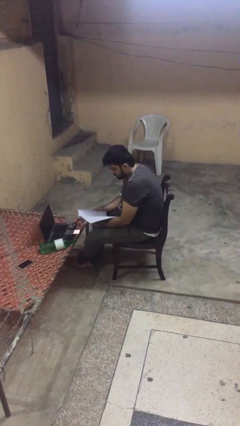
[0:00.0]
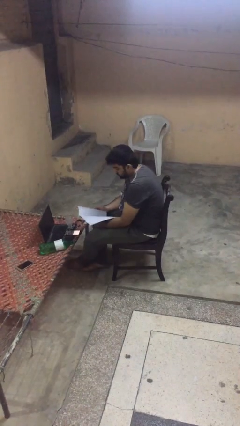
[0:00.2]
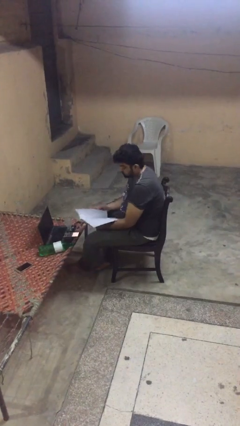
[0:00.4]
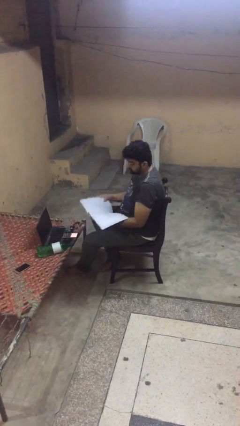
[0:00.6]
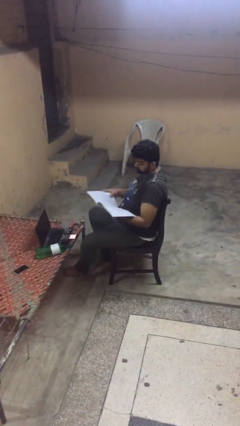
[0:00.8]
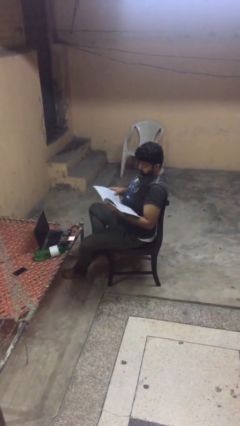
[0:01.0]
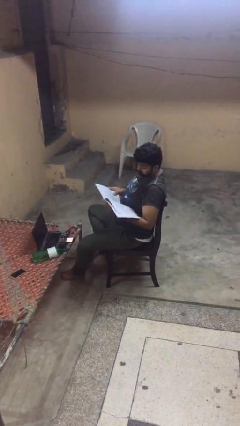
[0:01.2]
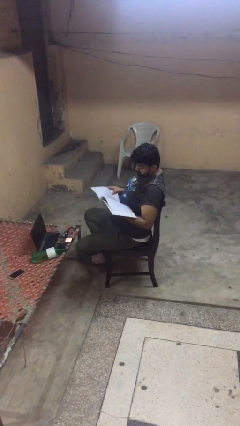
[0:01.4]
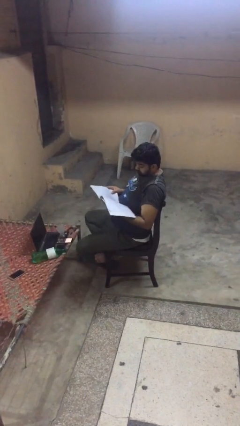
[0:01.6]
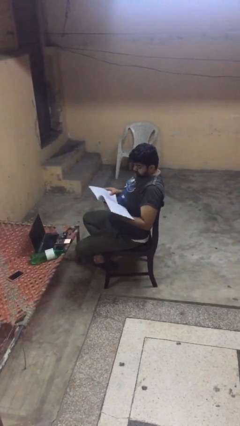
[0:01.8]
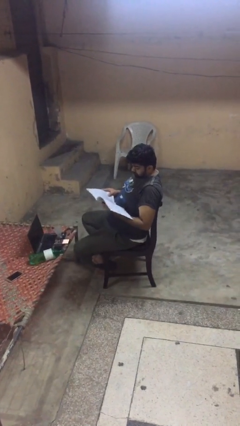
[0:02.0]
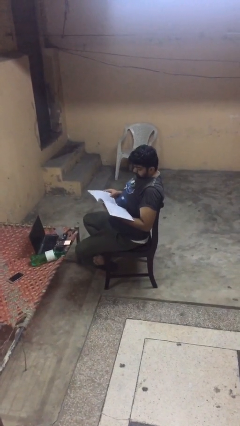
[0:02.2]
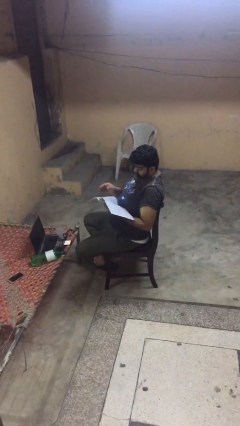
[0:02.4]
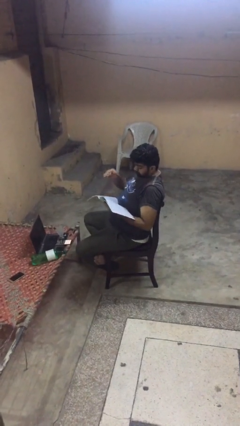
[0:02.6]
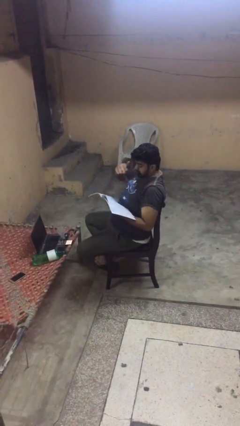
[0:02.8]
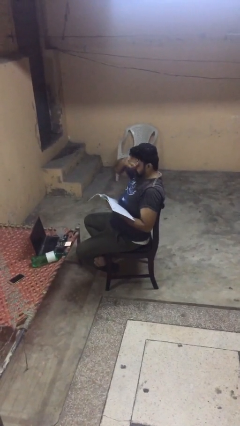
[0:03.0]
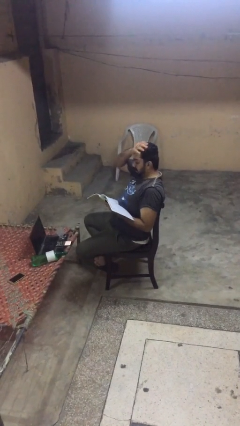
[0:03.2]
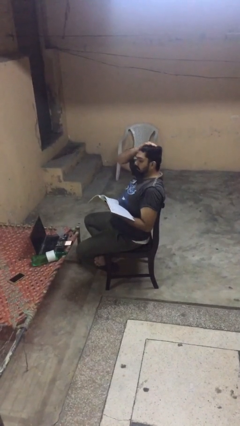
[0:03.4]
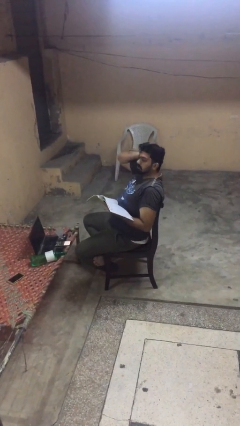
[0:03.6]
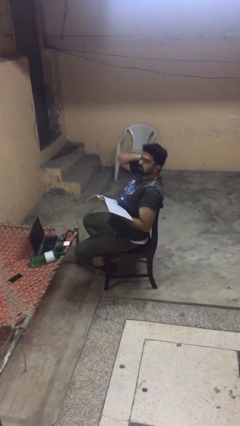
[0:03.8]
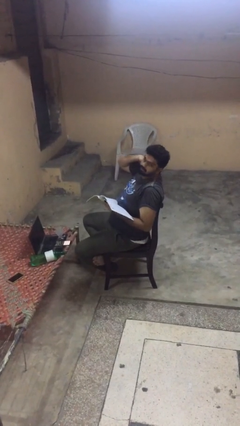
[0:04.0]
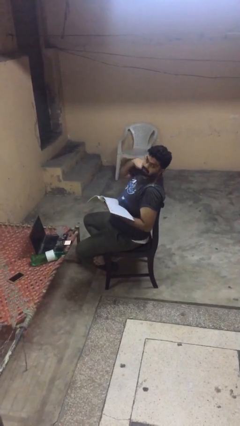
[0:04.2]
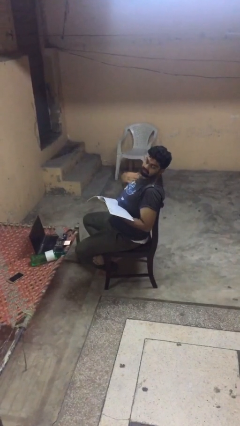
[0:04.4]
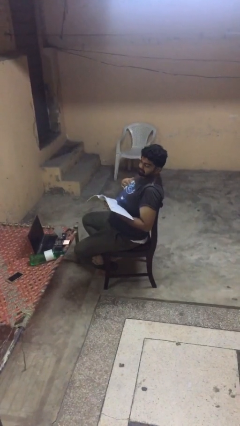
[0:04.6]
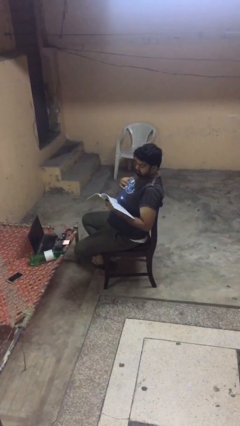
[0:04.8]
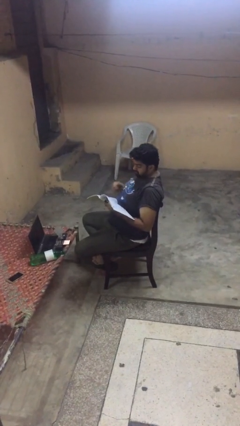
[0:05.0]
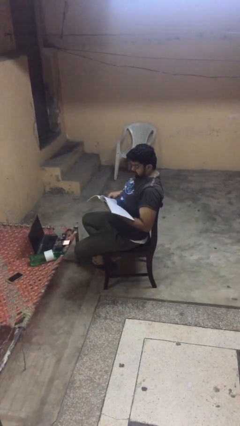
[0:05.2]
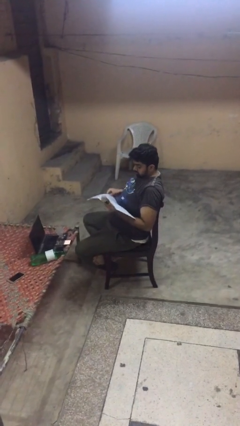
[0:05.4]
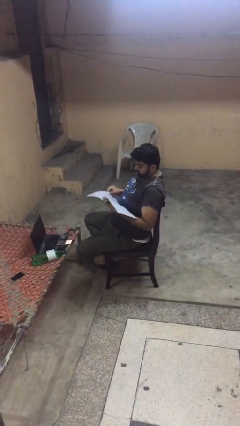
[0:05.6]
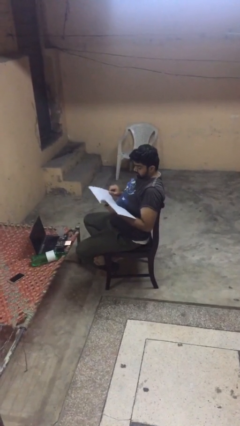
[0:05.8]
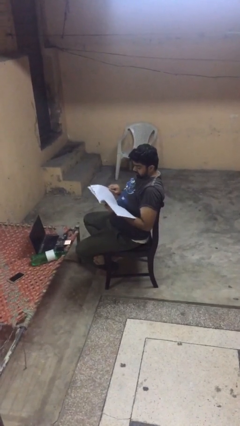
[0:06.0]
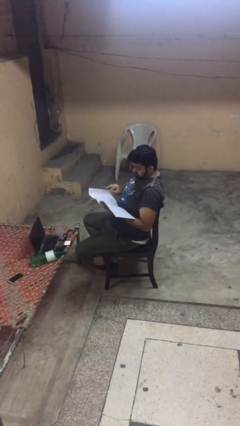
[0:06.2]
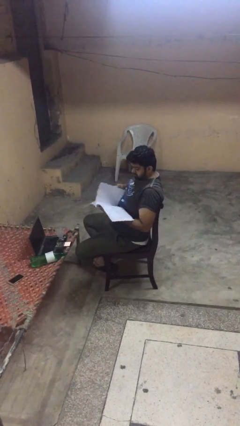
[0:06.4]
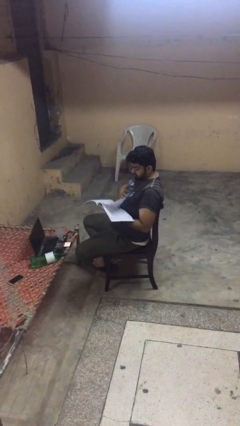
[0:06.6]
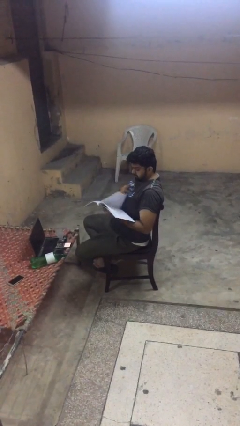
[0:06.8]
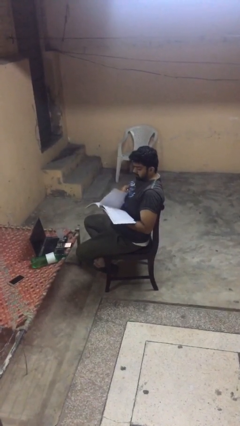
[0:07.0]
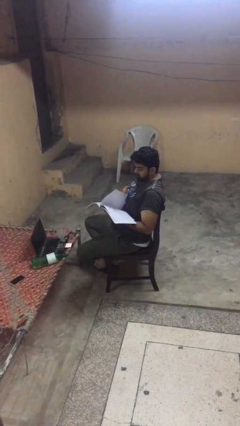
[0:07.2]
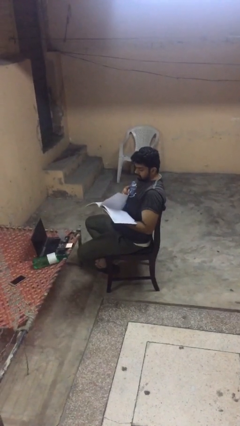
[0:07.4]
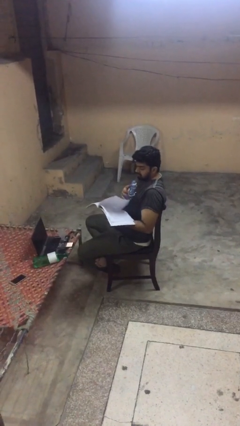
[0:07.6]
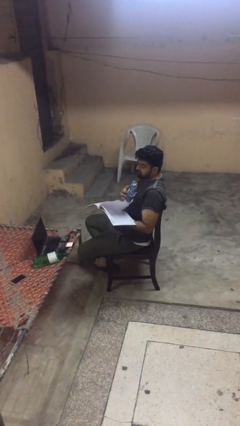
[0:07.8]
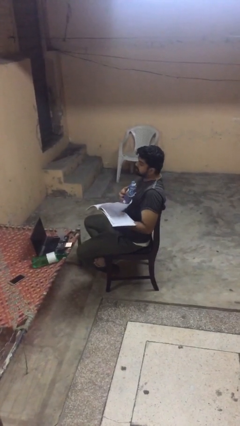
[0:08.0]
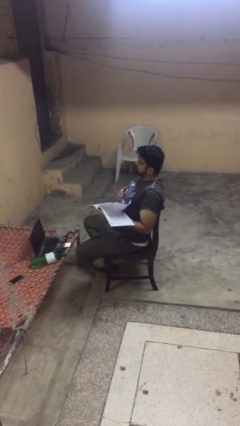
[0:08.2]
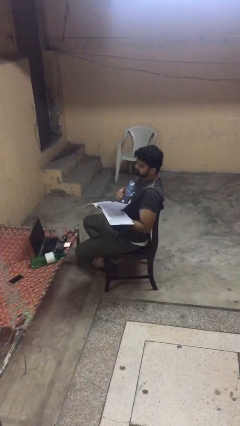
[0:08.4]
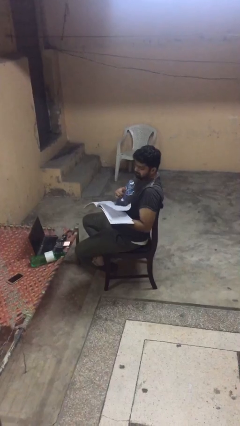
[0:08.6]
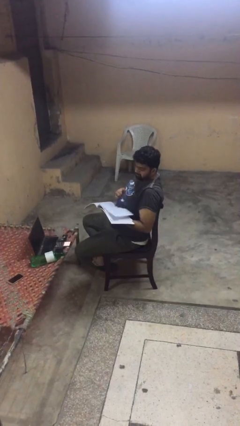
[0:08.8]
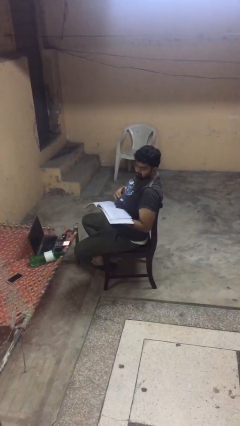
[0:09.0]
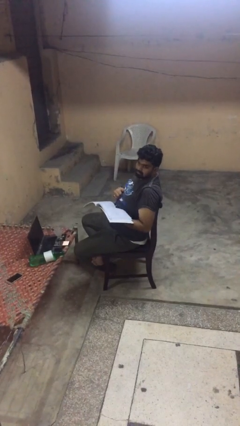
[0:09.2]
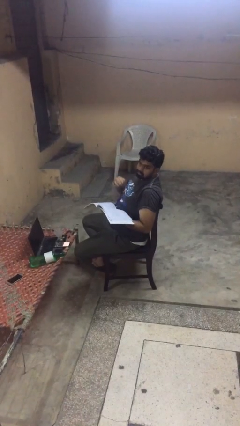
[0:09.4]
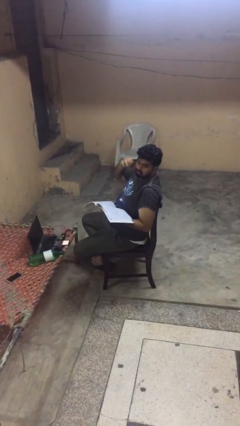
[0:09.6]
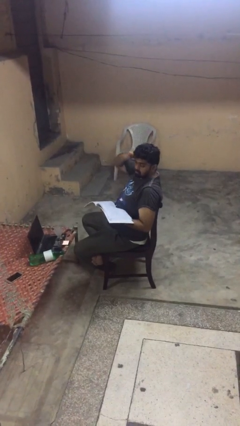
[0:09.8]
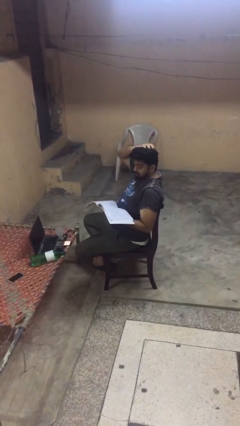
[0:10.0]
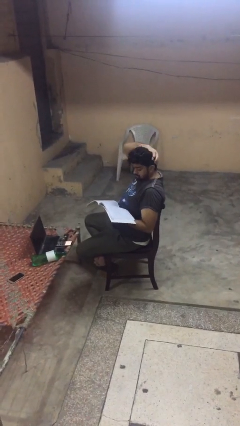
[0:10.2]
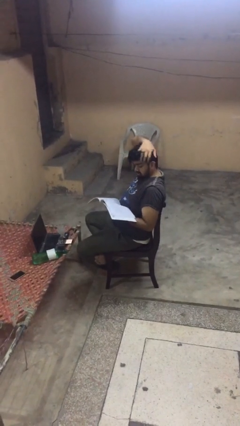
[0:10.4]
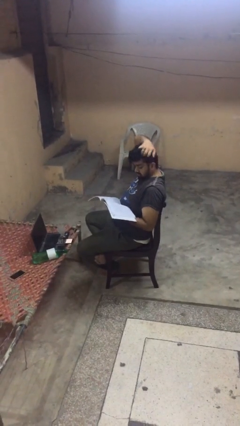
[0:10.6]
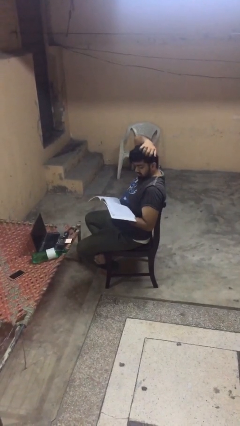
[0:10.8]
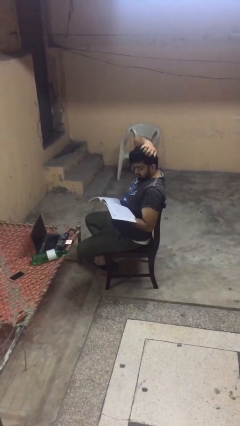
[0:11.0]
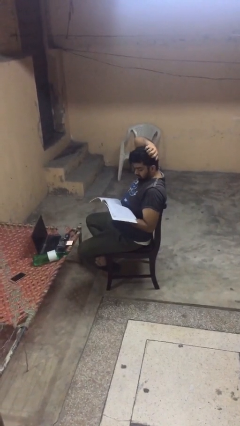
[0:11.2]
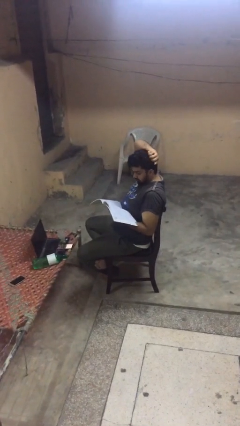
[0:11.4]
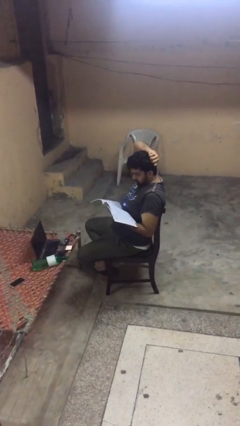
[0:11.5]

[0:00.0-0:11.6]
person reads document

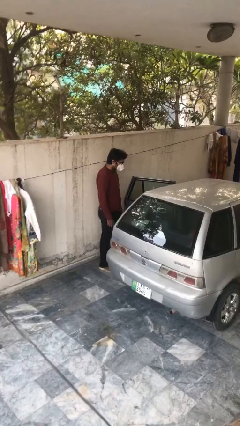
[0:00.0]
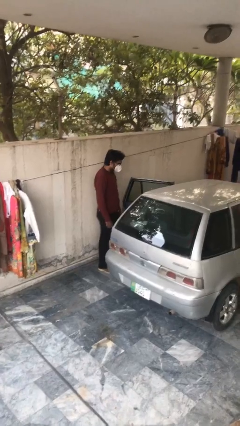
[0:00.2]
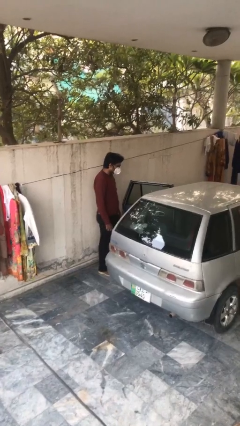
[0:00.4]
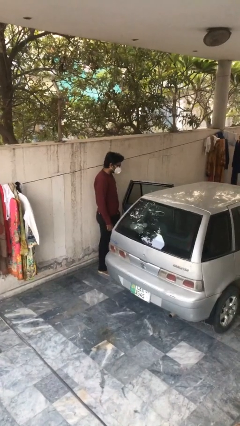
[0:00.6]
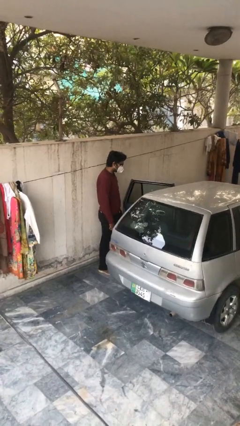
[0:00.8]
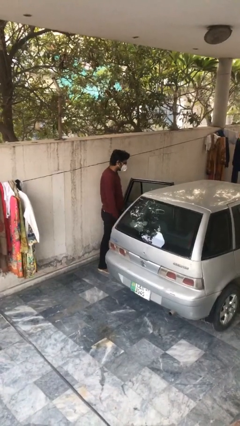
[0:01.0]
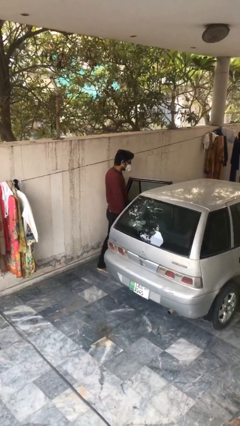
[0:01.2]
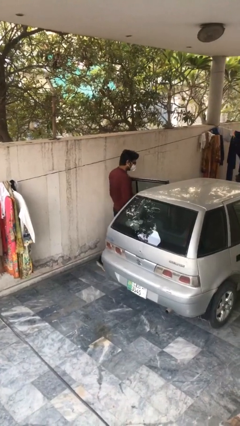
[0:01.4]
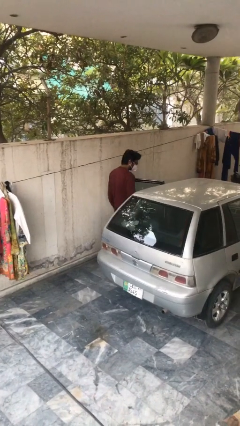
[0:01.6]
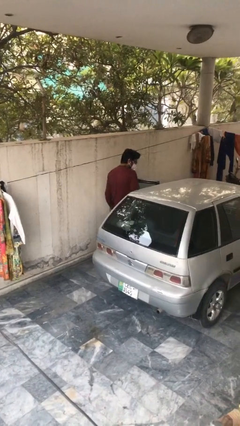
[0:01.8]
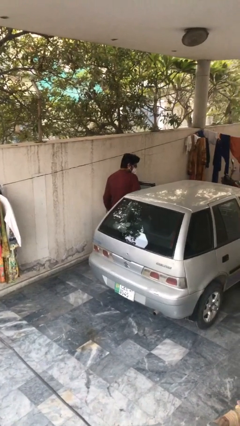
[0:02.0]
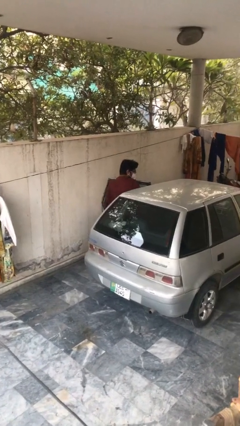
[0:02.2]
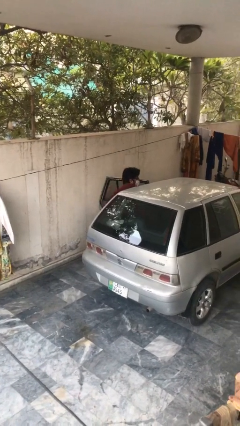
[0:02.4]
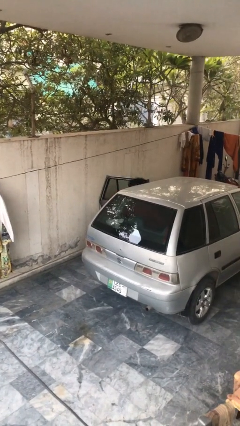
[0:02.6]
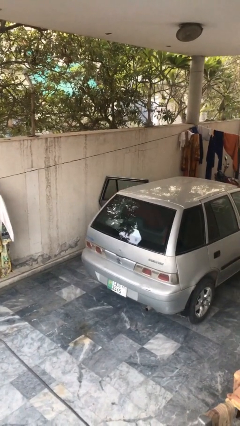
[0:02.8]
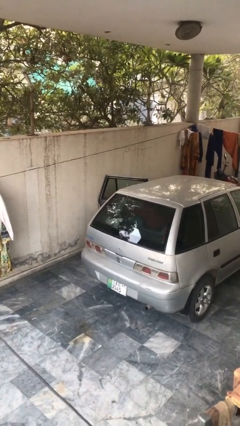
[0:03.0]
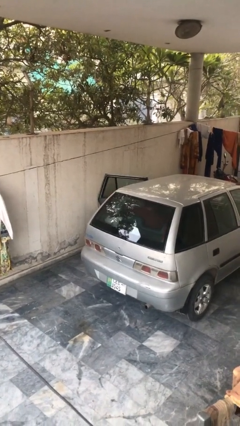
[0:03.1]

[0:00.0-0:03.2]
person enters car

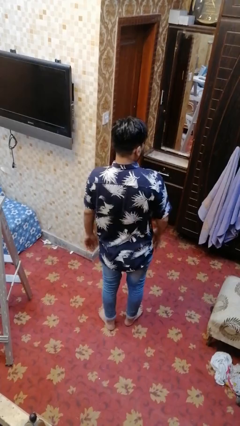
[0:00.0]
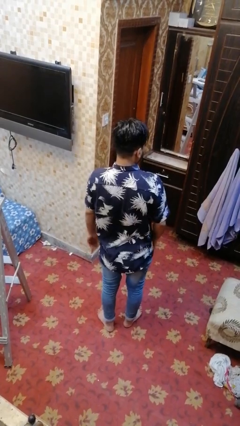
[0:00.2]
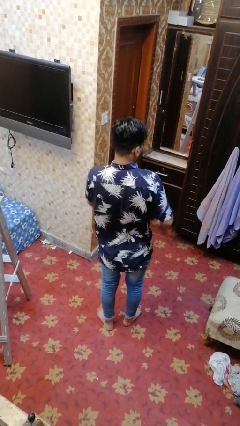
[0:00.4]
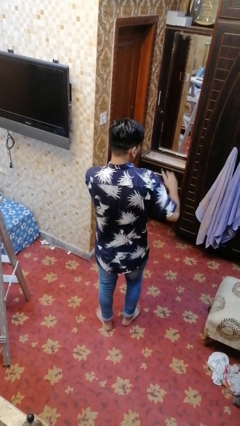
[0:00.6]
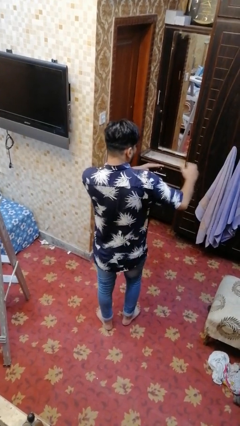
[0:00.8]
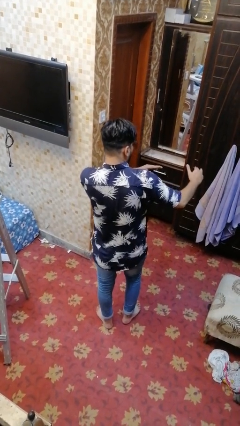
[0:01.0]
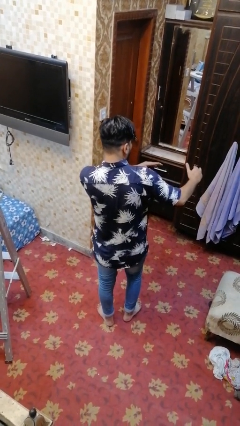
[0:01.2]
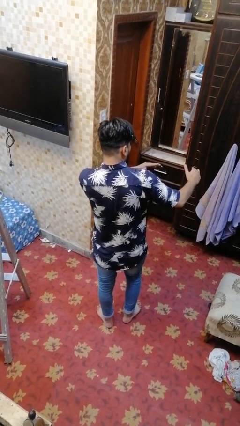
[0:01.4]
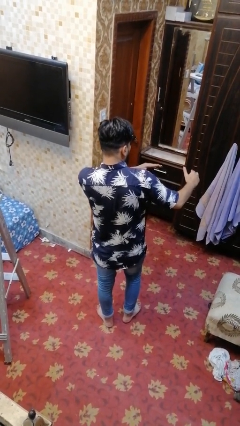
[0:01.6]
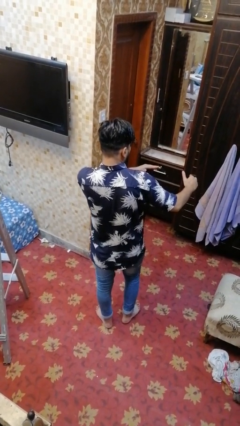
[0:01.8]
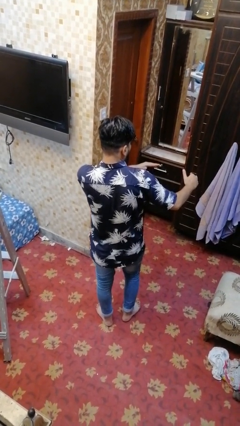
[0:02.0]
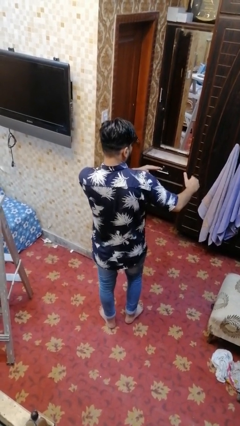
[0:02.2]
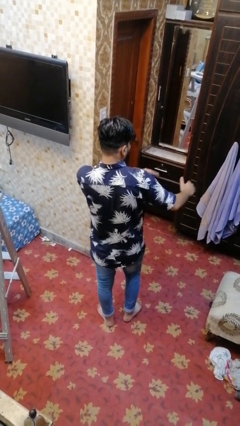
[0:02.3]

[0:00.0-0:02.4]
person karate chop

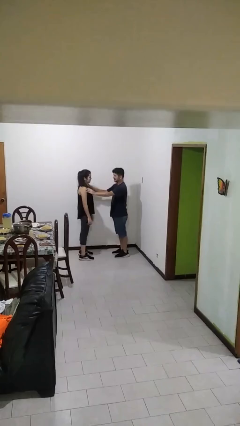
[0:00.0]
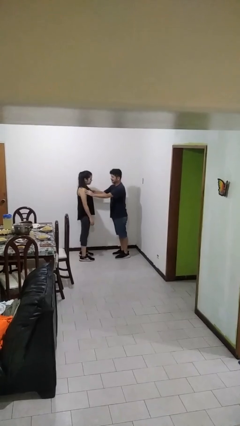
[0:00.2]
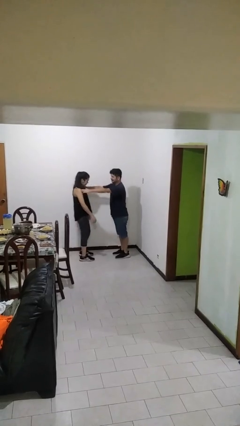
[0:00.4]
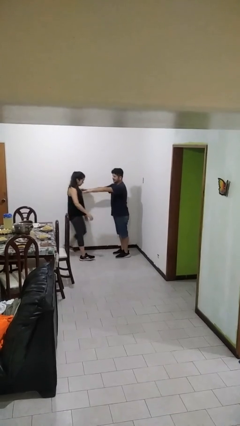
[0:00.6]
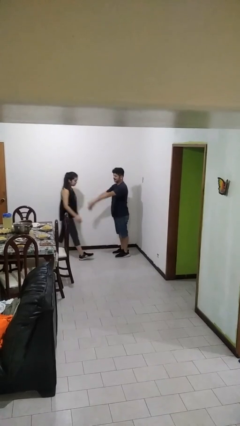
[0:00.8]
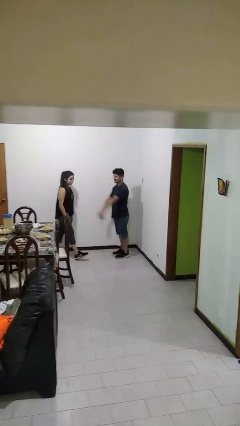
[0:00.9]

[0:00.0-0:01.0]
person shoves person
